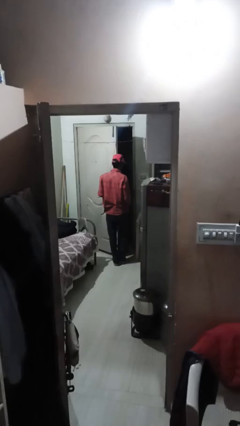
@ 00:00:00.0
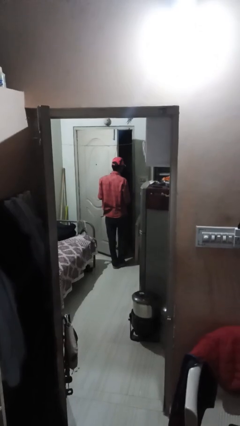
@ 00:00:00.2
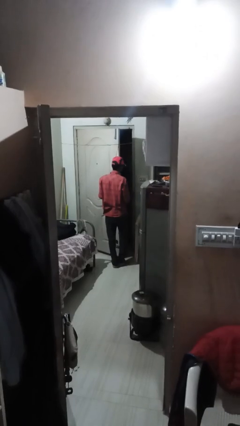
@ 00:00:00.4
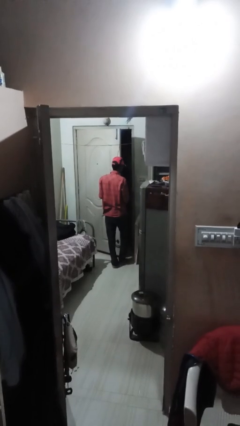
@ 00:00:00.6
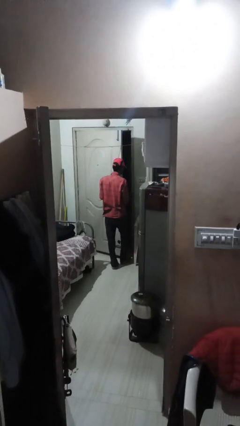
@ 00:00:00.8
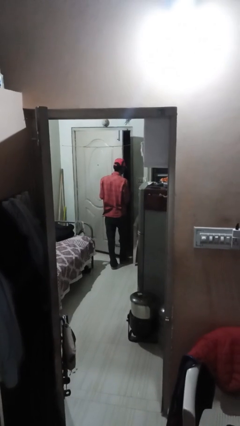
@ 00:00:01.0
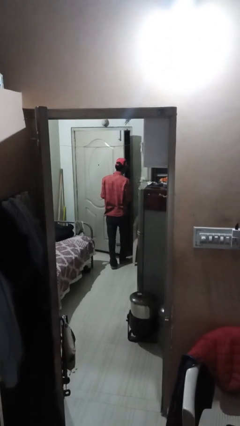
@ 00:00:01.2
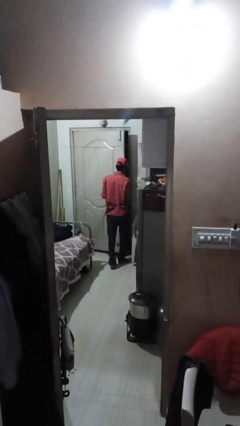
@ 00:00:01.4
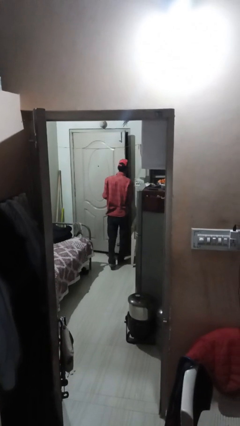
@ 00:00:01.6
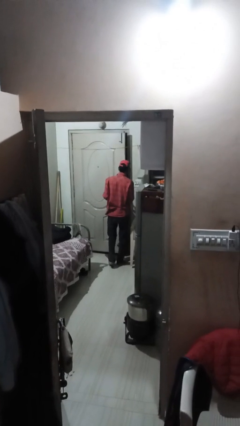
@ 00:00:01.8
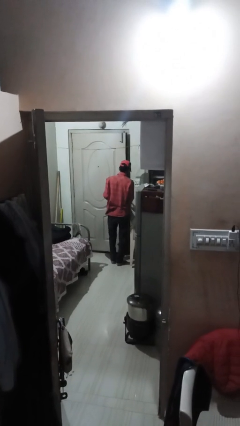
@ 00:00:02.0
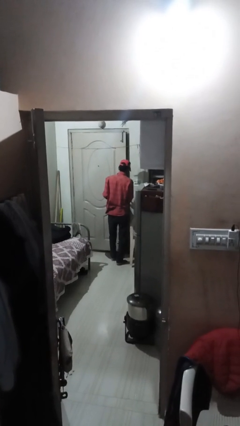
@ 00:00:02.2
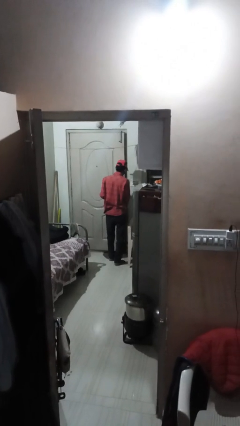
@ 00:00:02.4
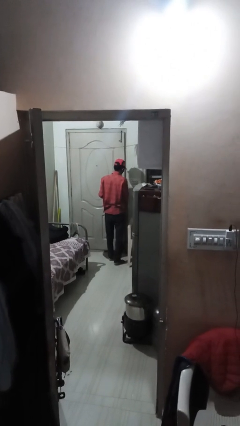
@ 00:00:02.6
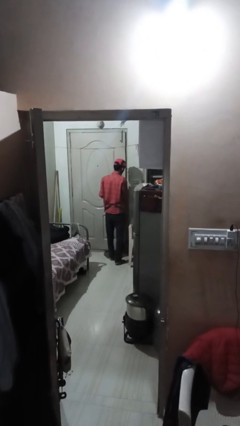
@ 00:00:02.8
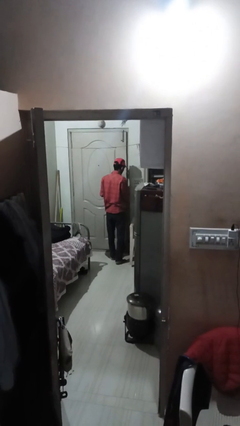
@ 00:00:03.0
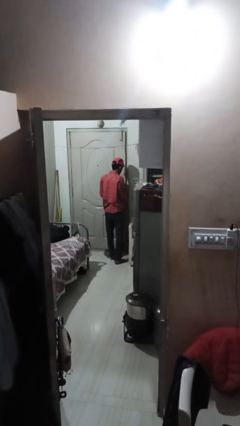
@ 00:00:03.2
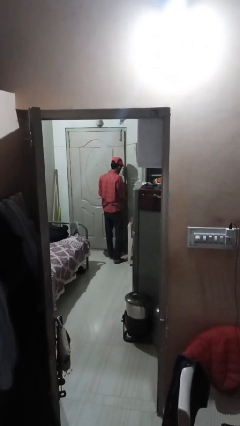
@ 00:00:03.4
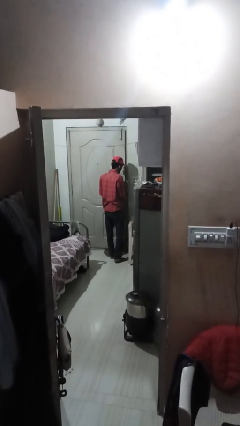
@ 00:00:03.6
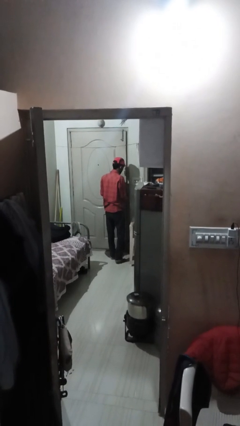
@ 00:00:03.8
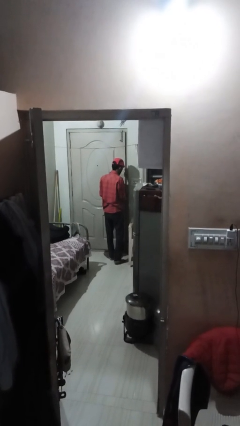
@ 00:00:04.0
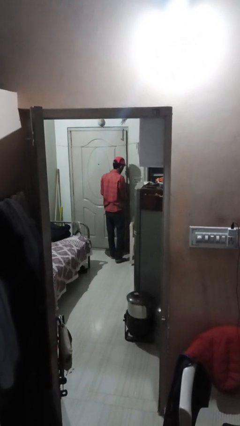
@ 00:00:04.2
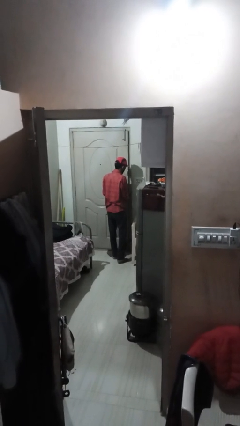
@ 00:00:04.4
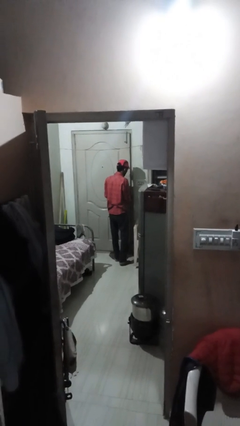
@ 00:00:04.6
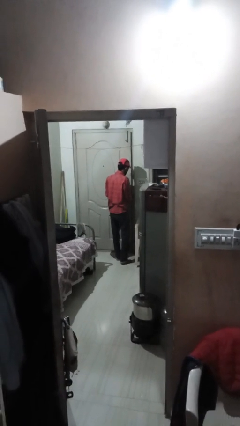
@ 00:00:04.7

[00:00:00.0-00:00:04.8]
person closes facility door

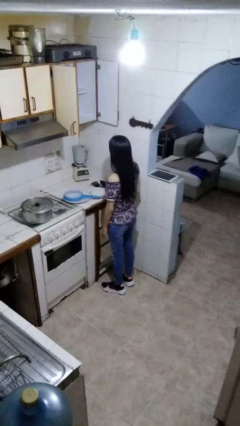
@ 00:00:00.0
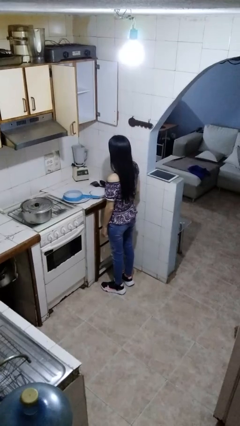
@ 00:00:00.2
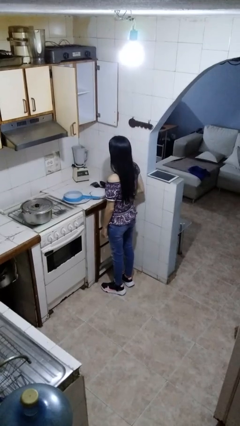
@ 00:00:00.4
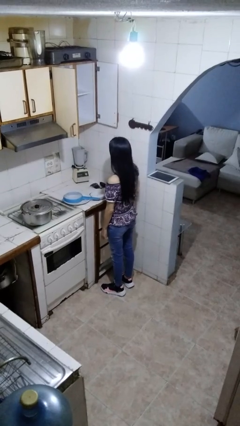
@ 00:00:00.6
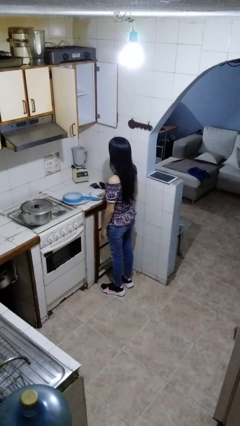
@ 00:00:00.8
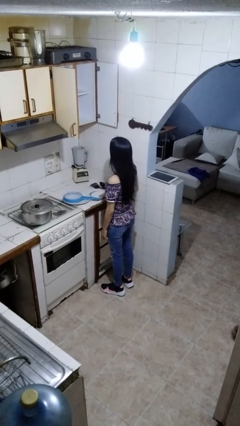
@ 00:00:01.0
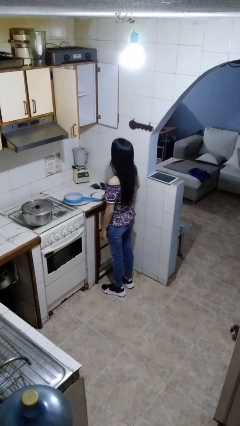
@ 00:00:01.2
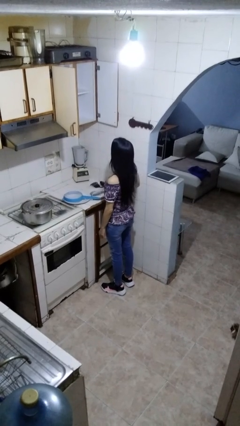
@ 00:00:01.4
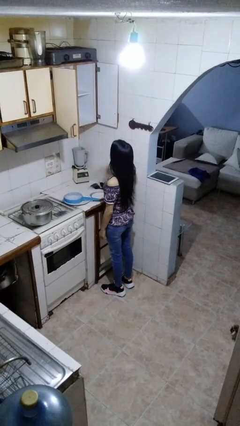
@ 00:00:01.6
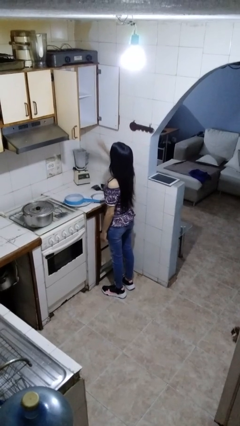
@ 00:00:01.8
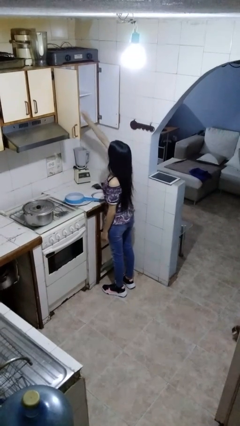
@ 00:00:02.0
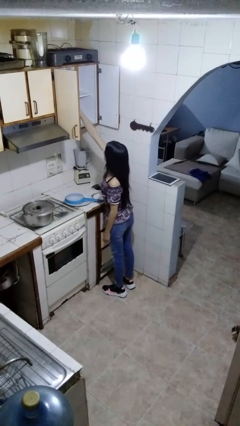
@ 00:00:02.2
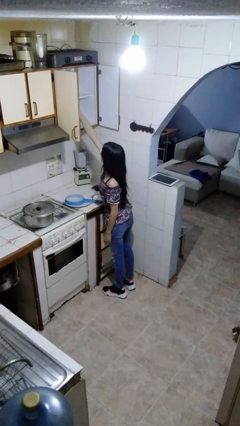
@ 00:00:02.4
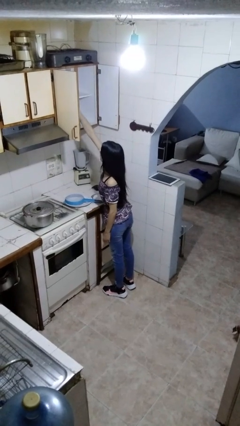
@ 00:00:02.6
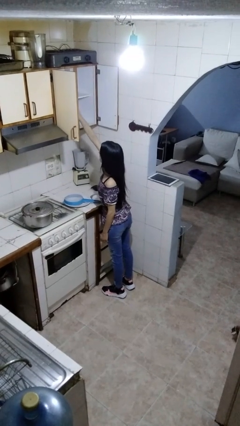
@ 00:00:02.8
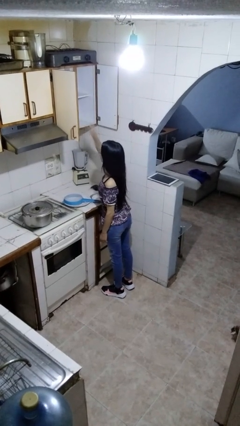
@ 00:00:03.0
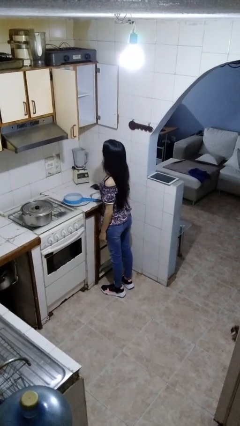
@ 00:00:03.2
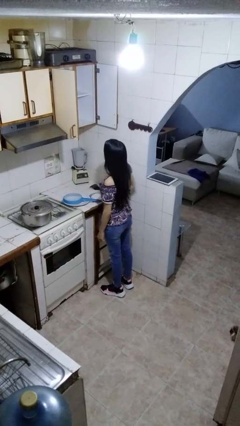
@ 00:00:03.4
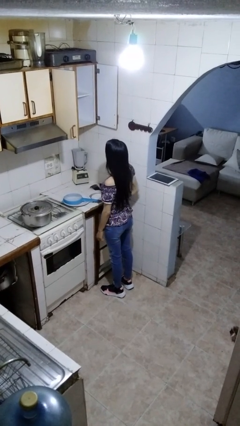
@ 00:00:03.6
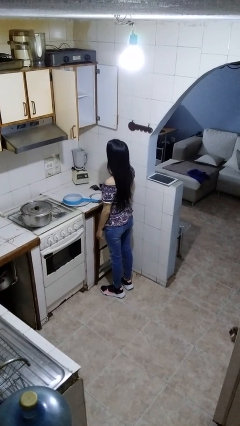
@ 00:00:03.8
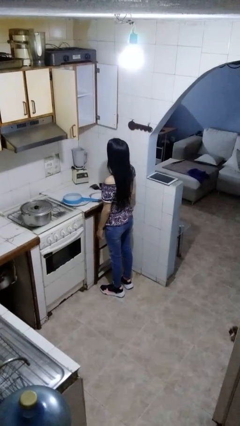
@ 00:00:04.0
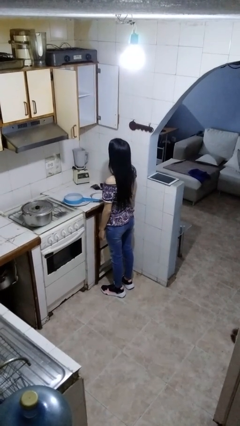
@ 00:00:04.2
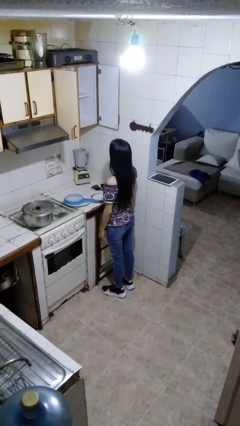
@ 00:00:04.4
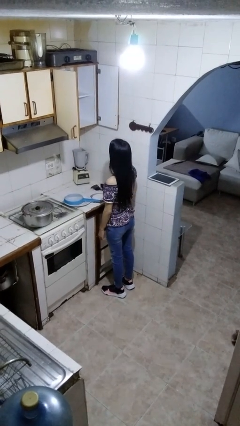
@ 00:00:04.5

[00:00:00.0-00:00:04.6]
person puts object in cabinet

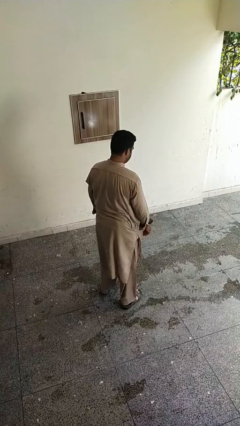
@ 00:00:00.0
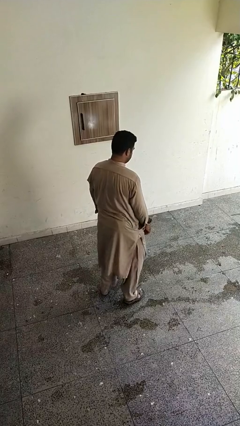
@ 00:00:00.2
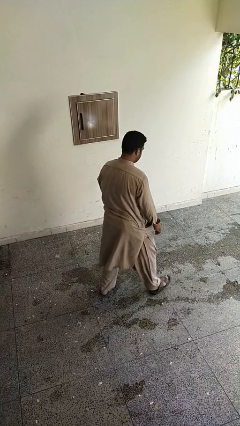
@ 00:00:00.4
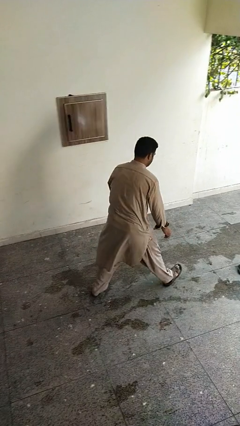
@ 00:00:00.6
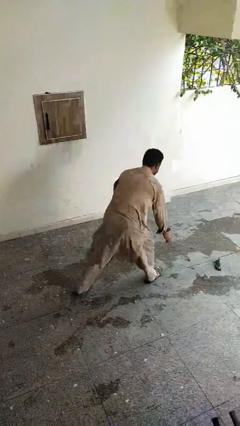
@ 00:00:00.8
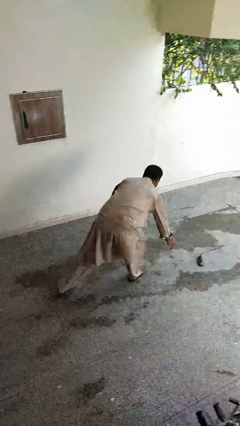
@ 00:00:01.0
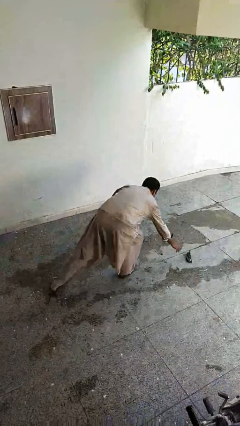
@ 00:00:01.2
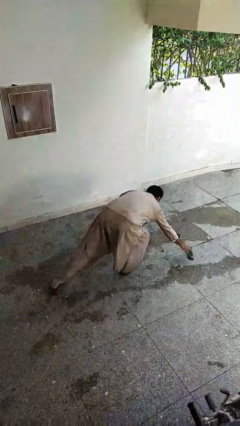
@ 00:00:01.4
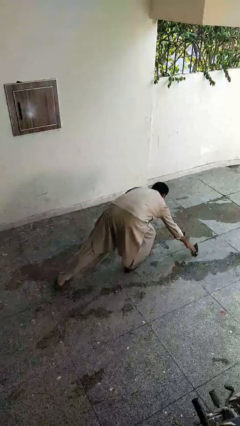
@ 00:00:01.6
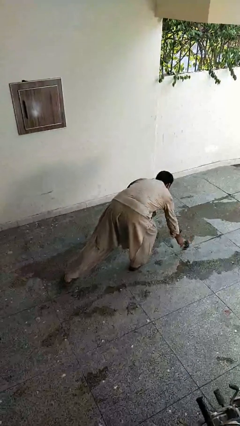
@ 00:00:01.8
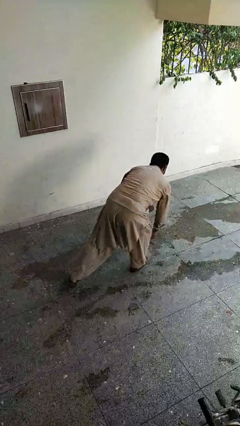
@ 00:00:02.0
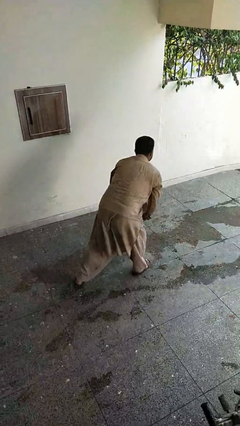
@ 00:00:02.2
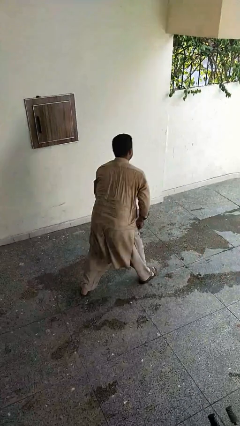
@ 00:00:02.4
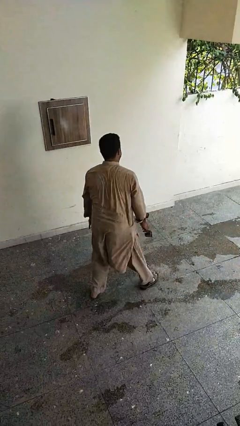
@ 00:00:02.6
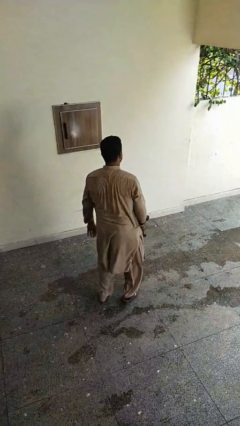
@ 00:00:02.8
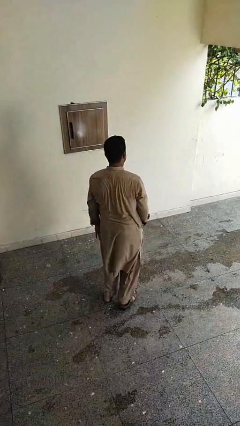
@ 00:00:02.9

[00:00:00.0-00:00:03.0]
person picks up object from floor

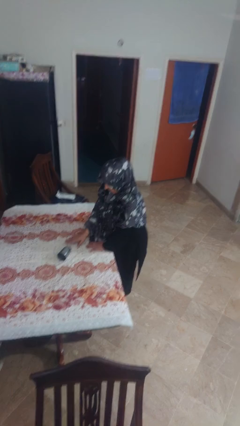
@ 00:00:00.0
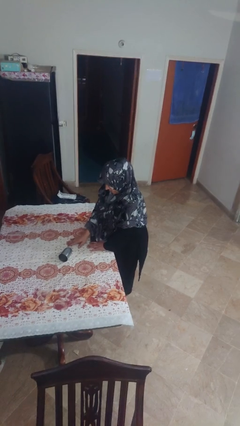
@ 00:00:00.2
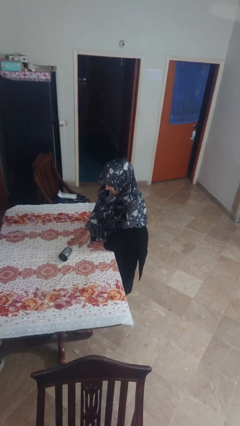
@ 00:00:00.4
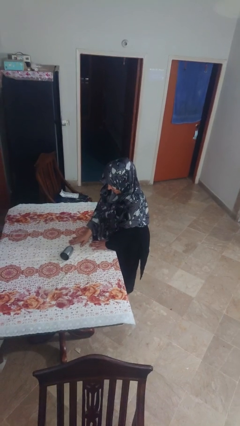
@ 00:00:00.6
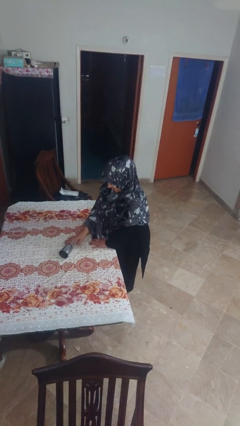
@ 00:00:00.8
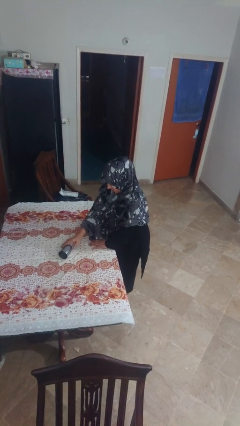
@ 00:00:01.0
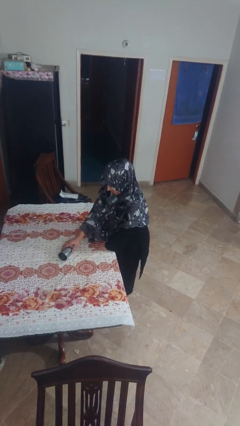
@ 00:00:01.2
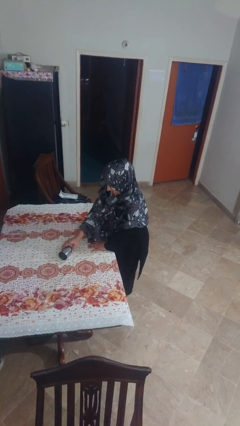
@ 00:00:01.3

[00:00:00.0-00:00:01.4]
person knocks over glass

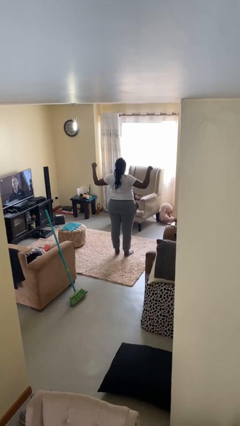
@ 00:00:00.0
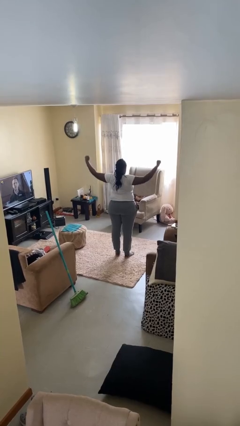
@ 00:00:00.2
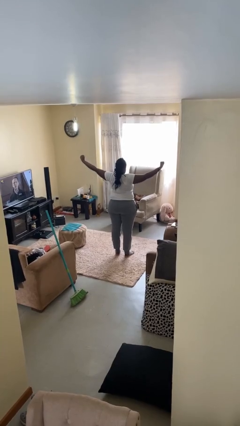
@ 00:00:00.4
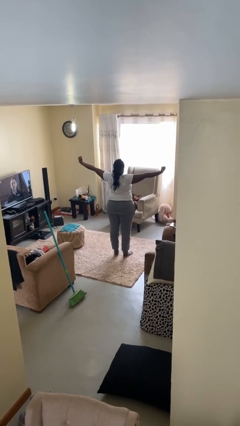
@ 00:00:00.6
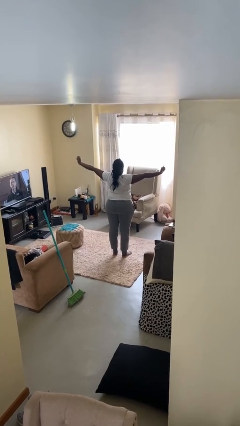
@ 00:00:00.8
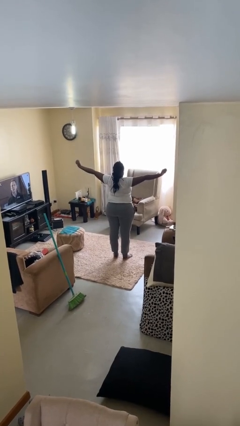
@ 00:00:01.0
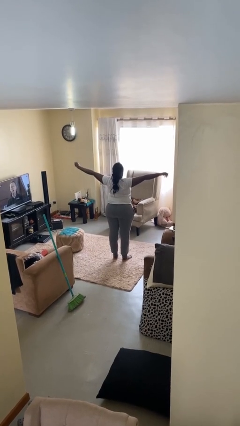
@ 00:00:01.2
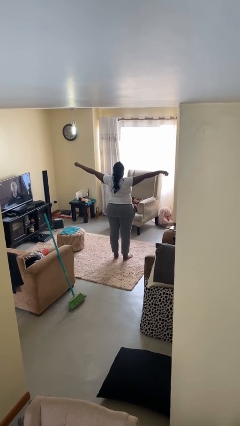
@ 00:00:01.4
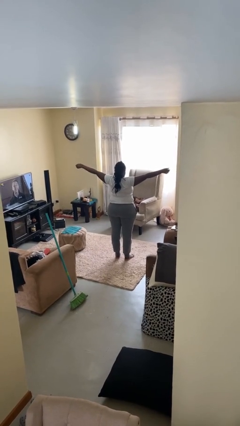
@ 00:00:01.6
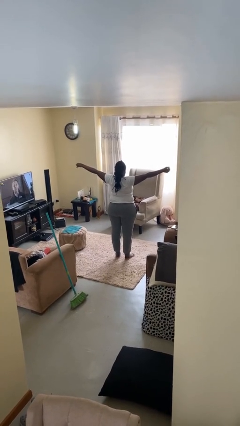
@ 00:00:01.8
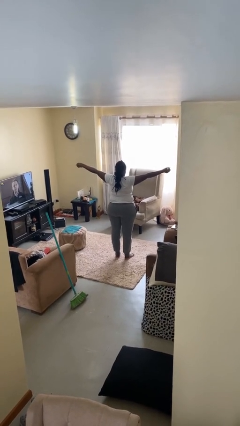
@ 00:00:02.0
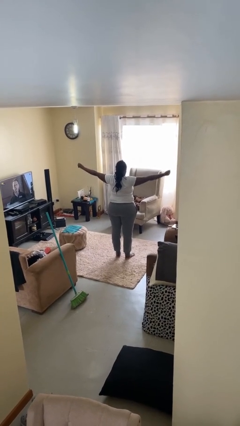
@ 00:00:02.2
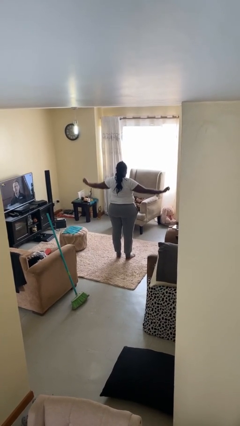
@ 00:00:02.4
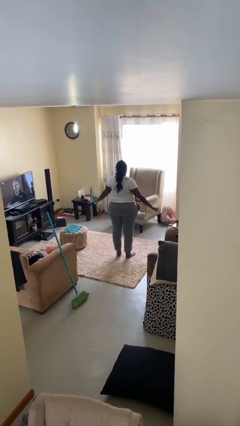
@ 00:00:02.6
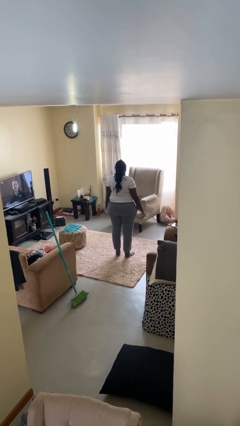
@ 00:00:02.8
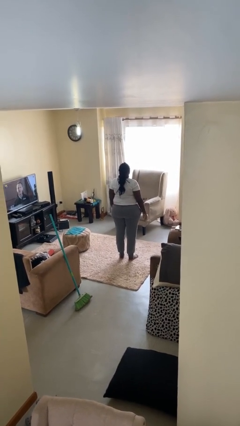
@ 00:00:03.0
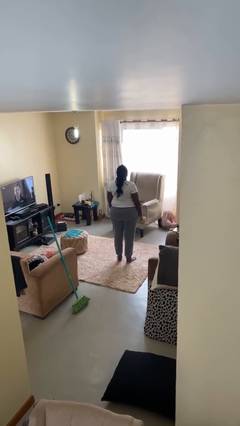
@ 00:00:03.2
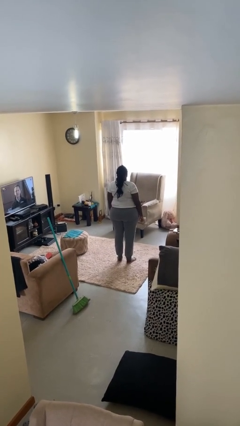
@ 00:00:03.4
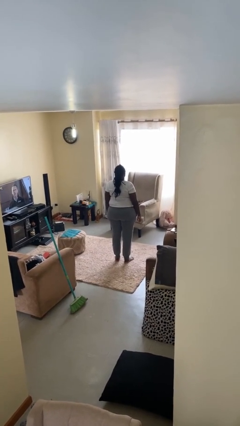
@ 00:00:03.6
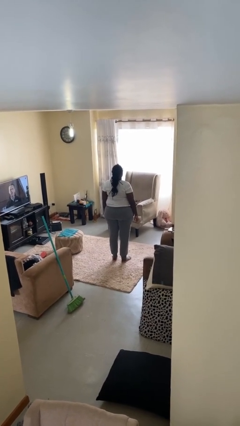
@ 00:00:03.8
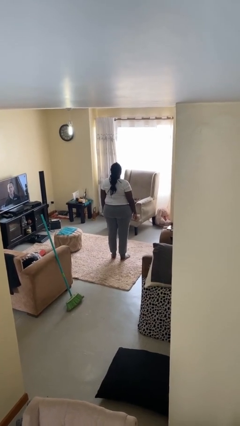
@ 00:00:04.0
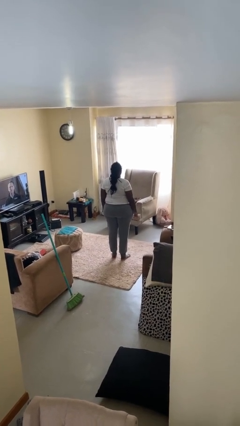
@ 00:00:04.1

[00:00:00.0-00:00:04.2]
person stretches arms to side
